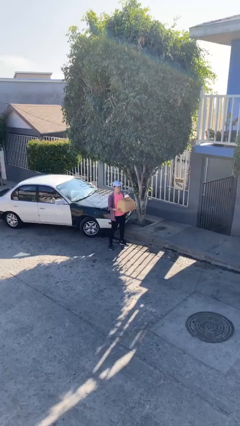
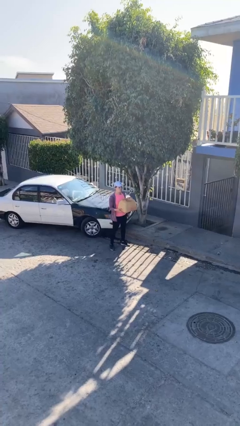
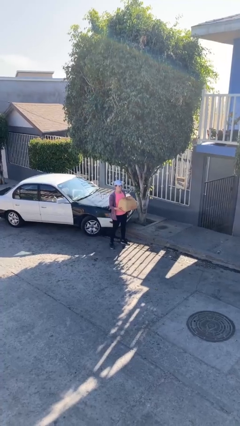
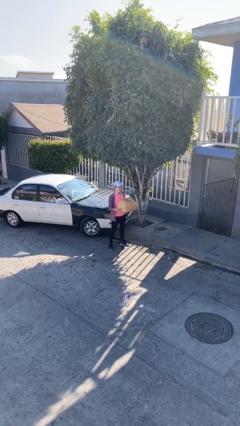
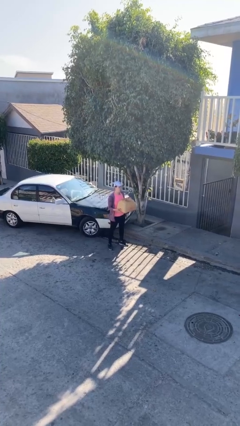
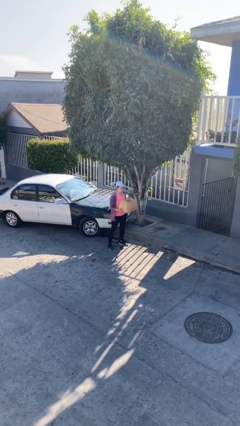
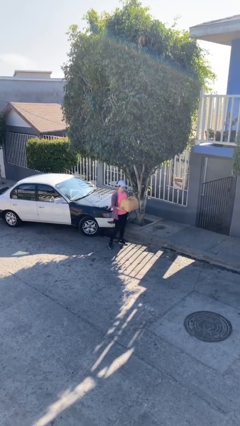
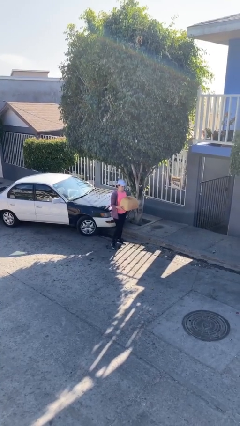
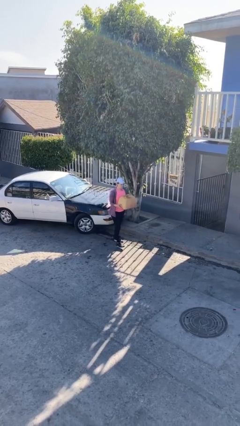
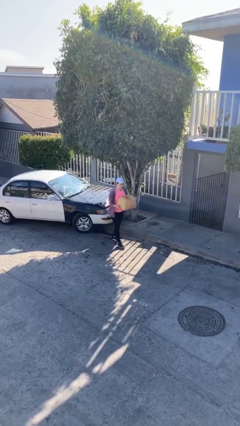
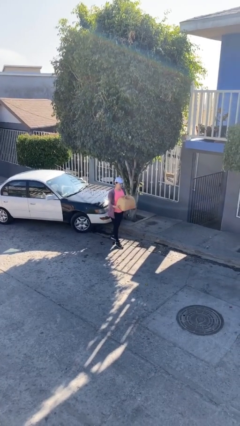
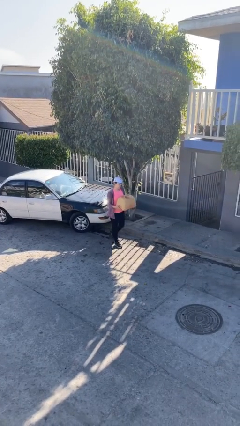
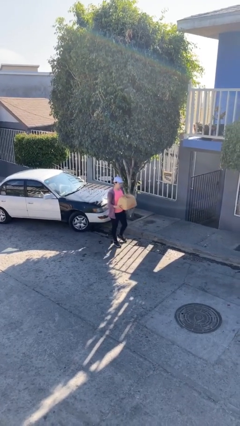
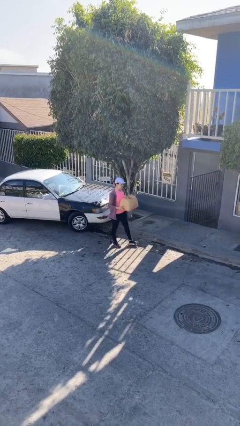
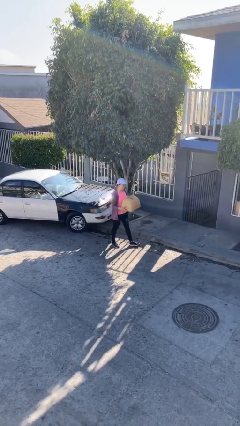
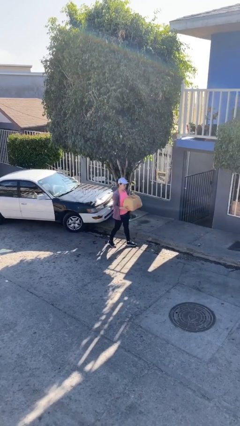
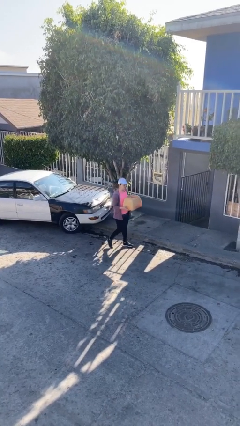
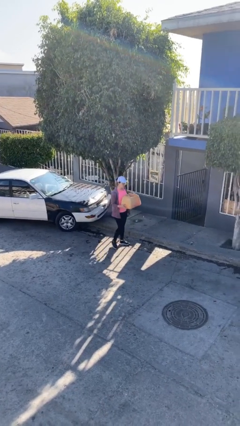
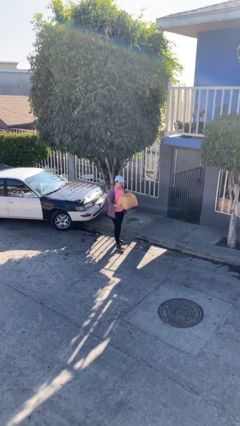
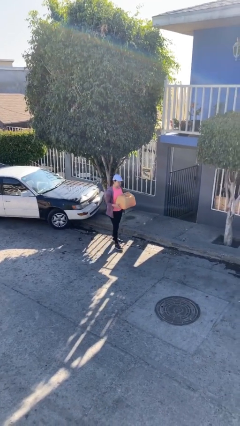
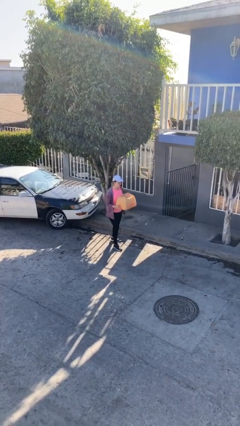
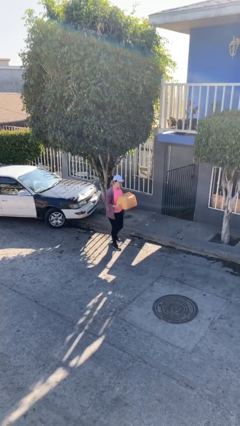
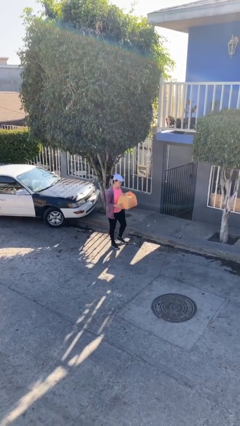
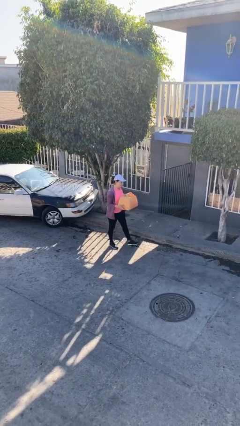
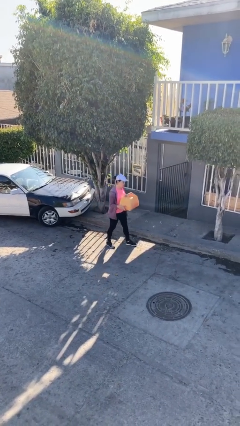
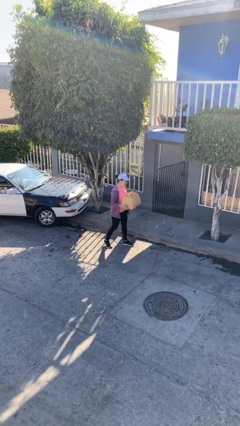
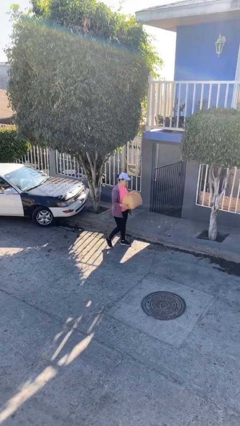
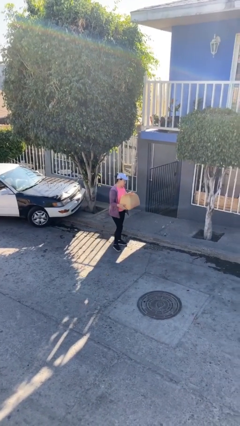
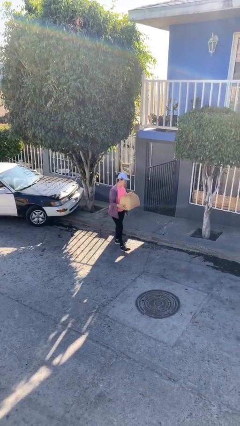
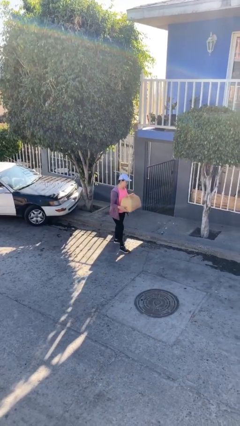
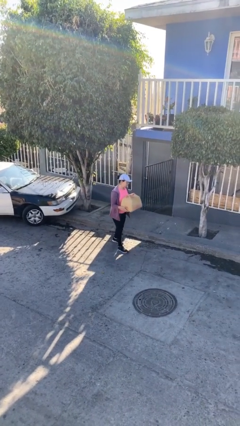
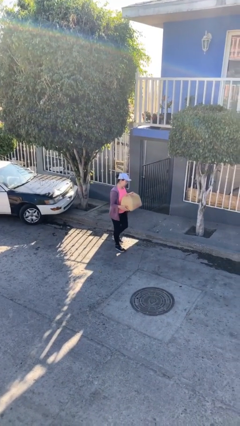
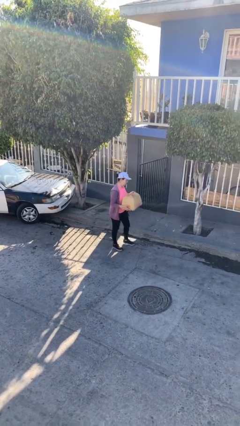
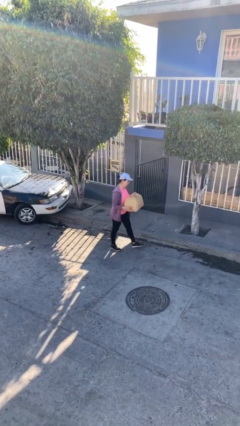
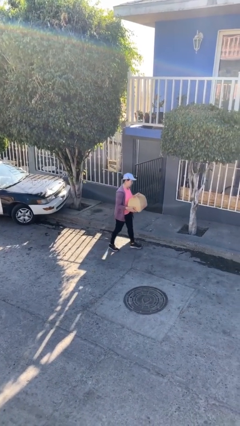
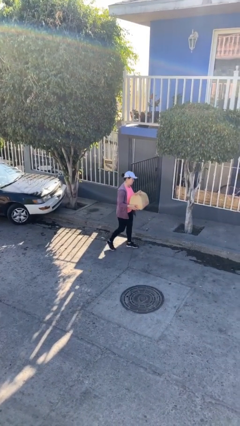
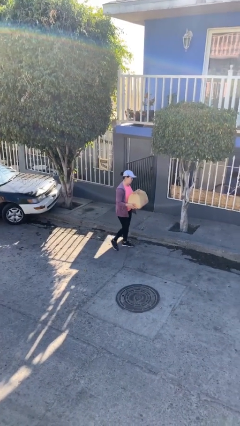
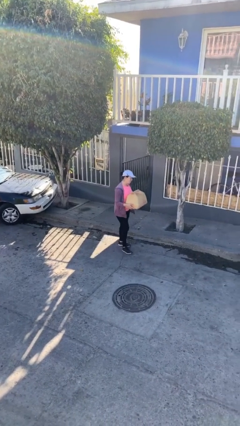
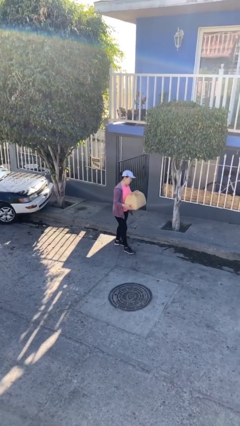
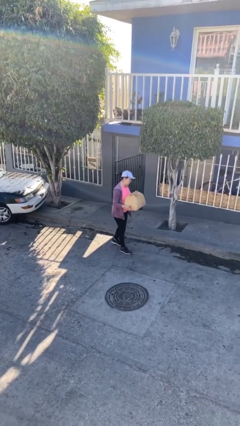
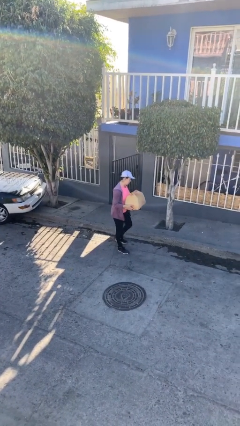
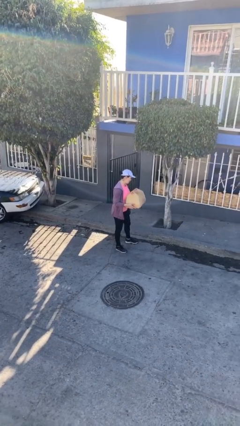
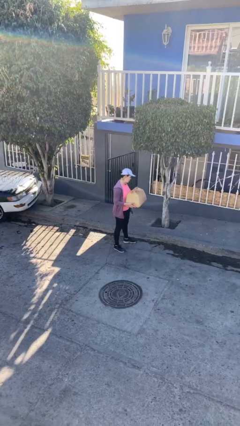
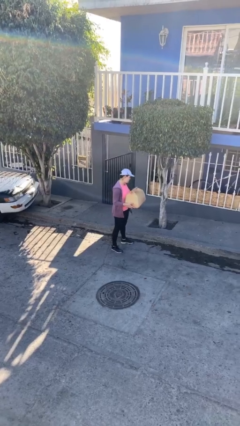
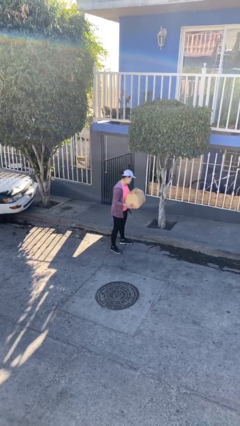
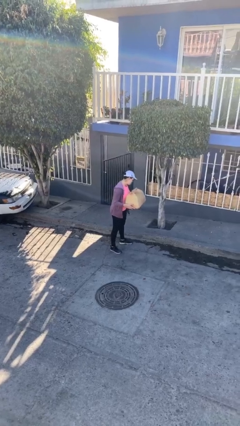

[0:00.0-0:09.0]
person carries heavy object

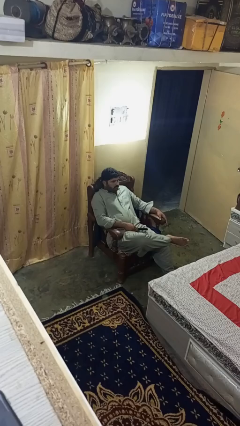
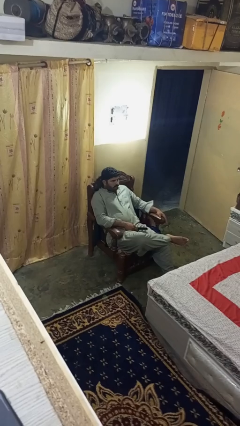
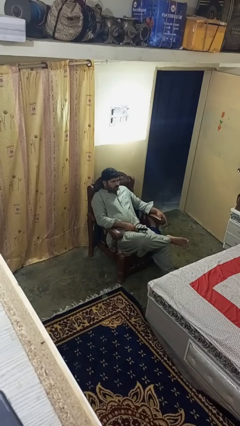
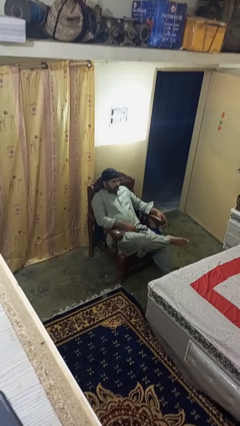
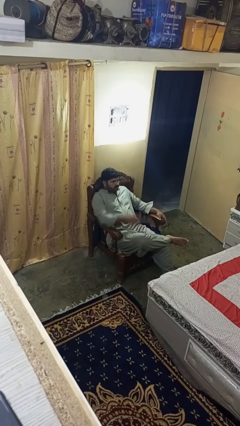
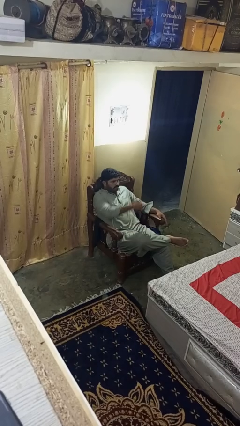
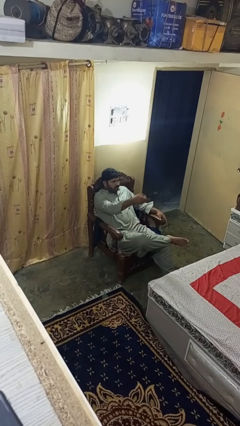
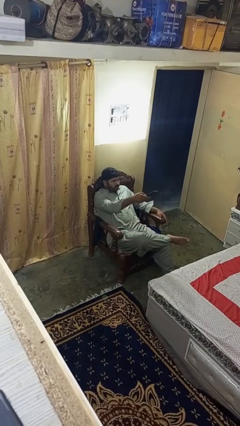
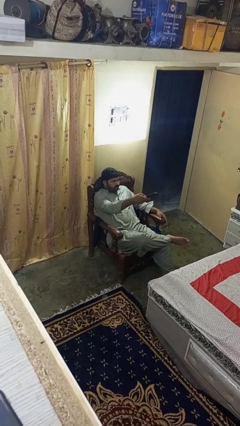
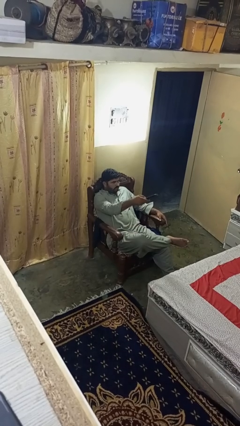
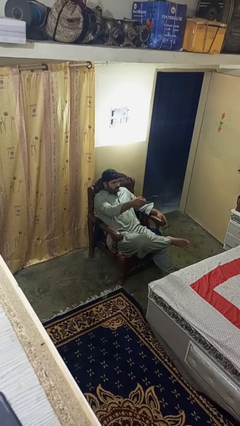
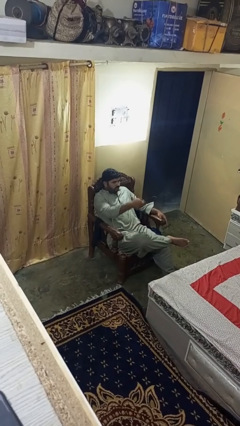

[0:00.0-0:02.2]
person uses television remote

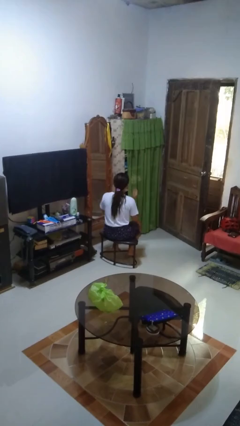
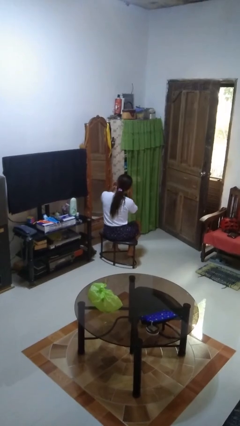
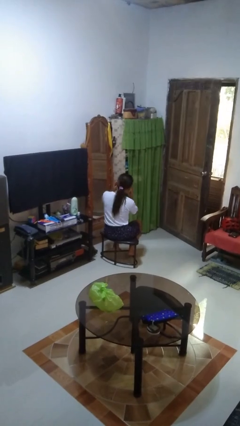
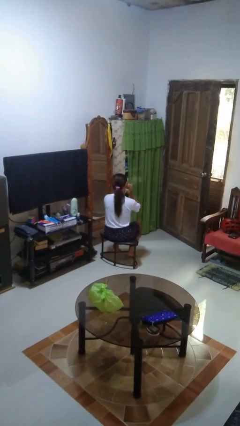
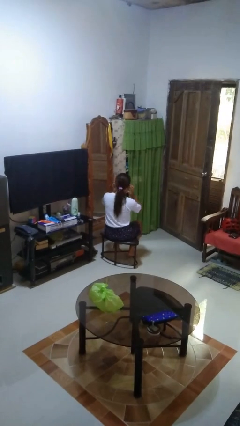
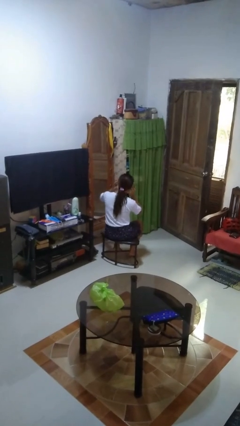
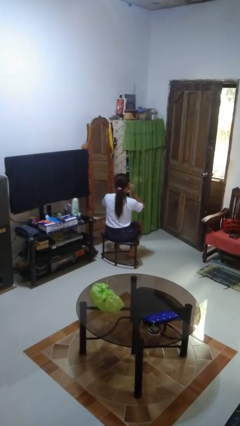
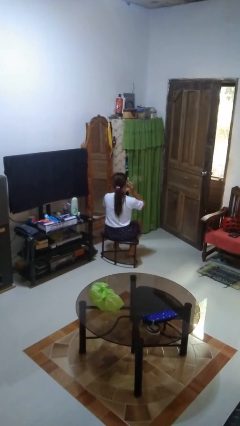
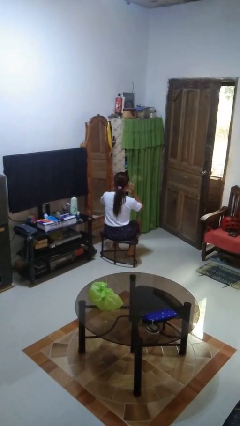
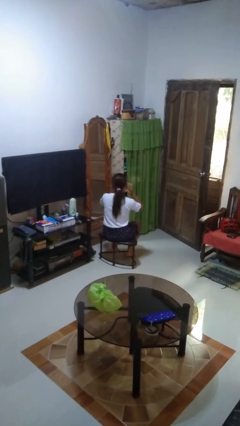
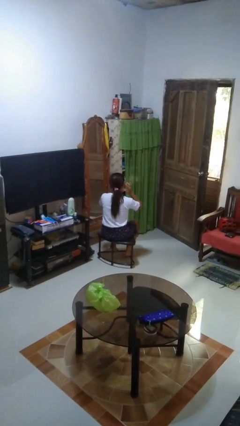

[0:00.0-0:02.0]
person puts fingers in ear

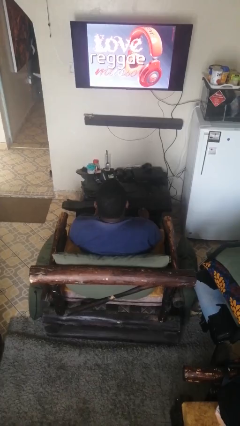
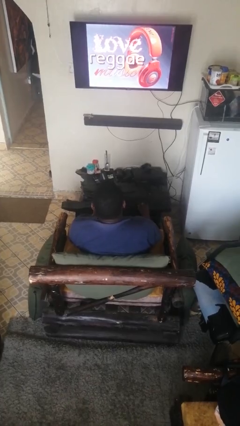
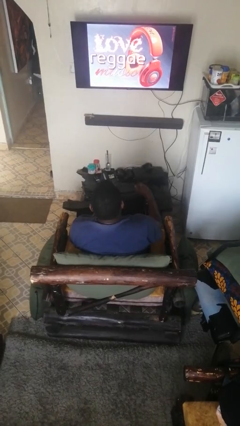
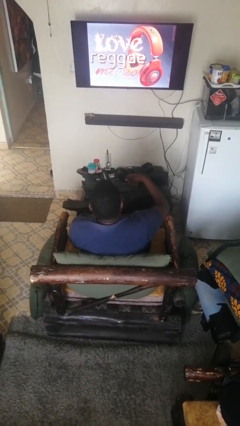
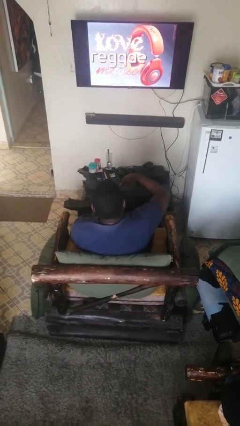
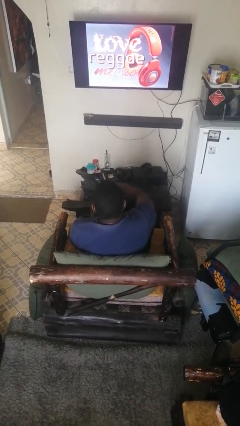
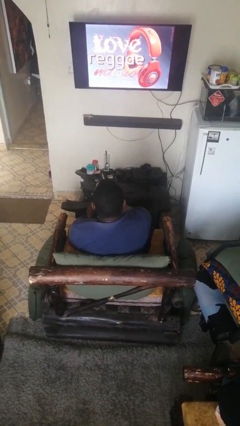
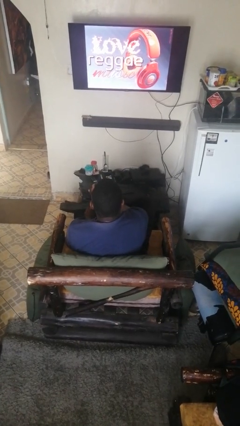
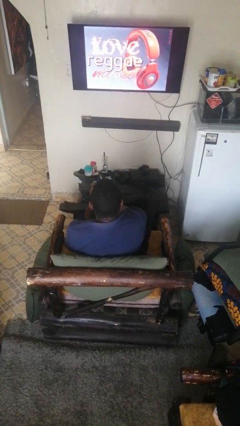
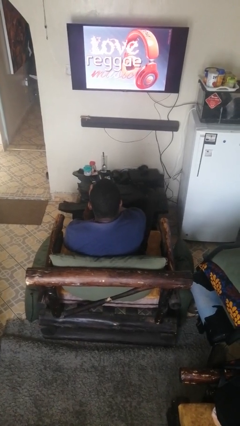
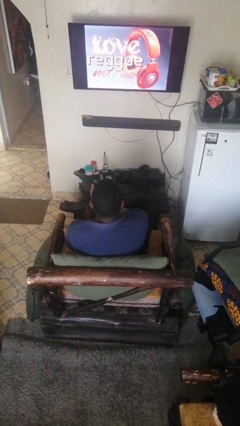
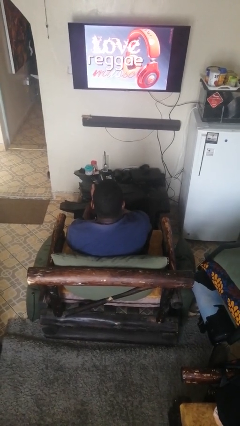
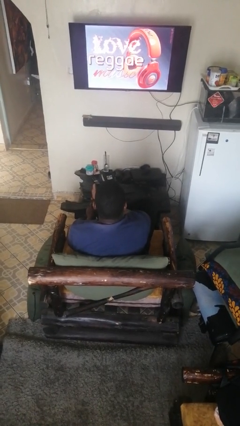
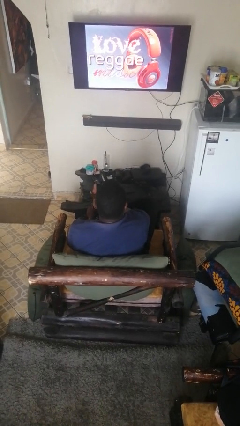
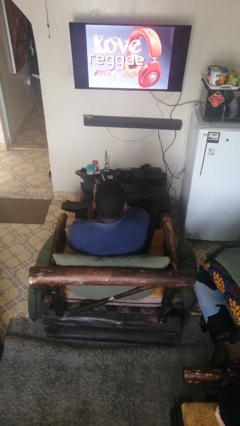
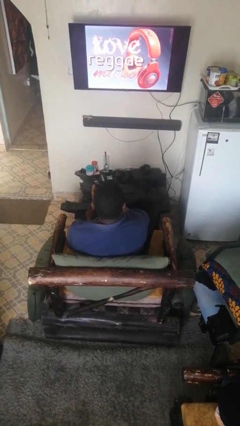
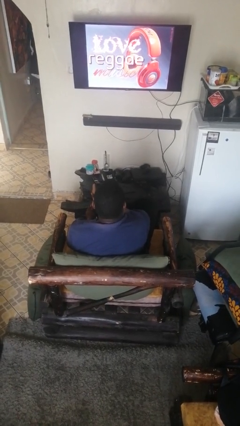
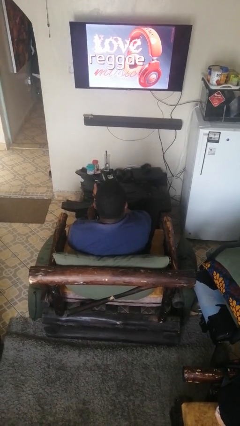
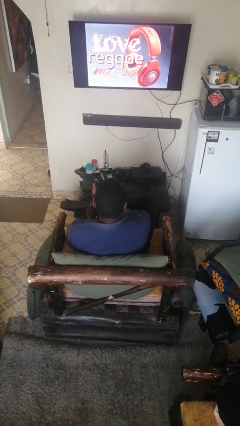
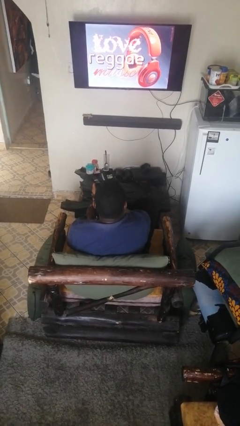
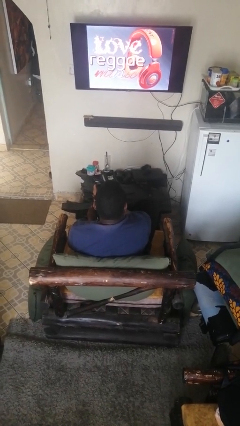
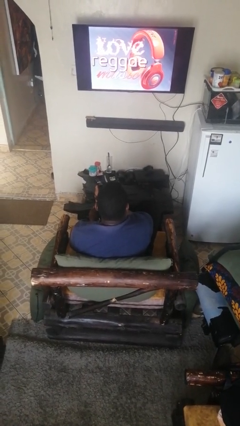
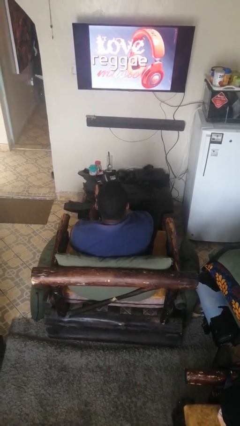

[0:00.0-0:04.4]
person rubs foot
